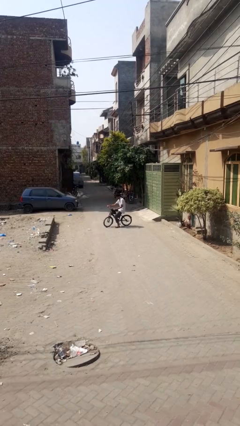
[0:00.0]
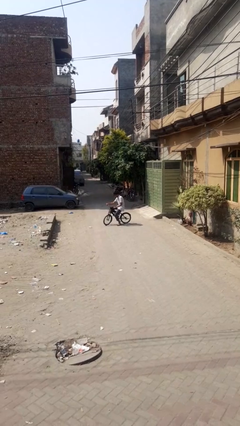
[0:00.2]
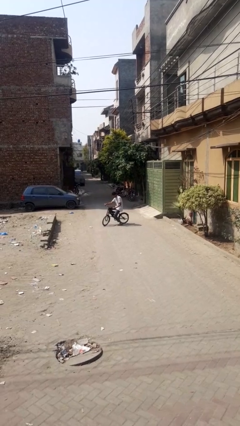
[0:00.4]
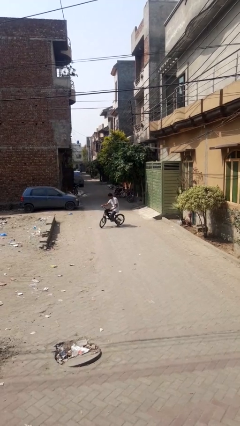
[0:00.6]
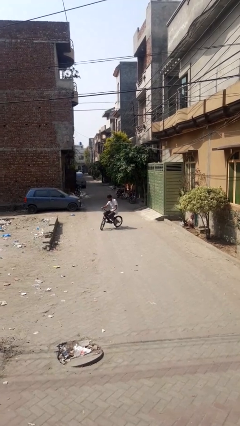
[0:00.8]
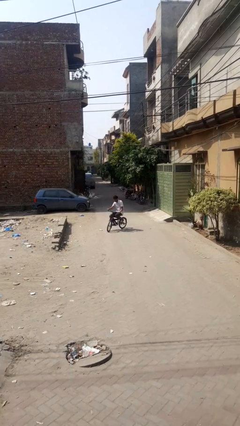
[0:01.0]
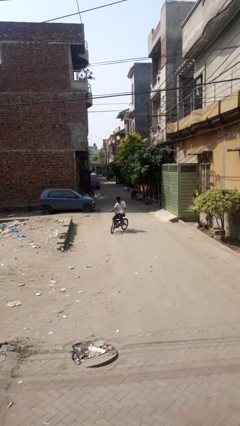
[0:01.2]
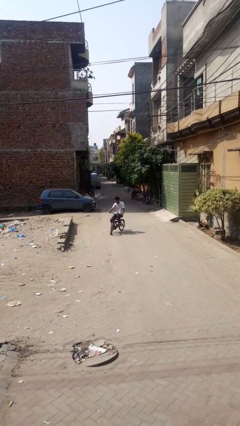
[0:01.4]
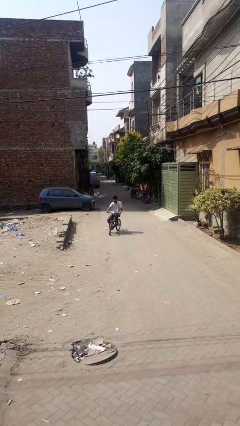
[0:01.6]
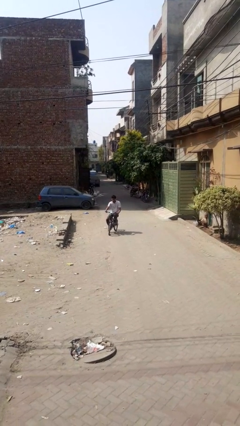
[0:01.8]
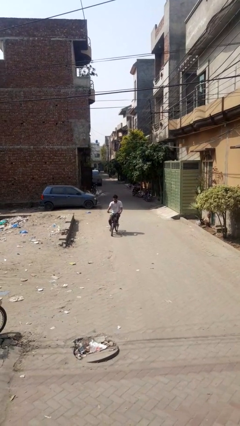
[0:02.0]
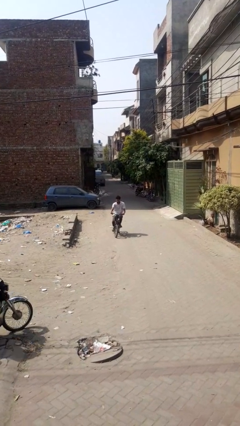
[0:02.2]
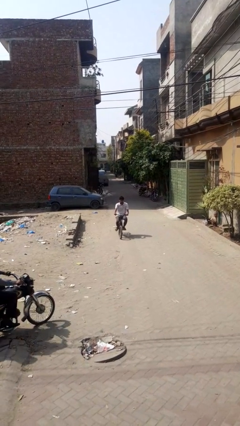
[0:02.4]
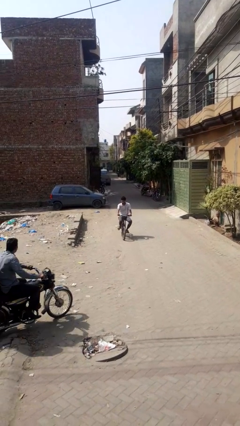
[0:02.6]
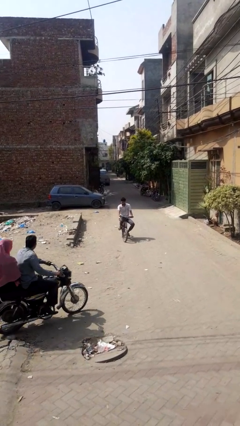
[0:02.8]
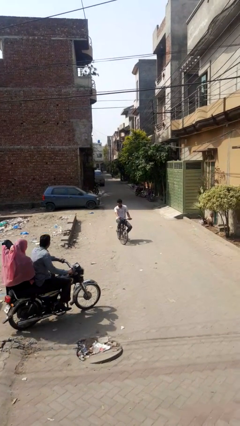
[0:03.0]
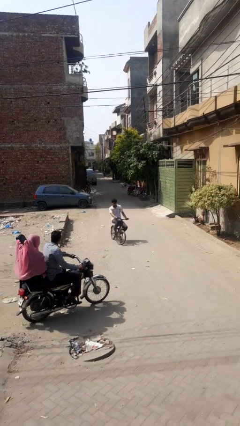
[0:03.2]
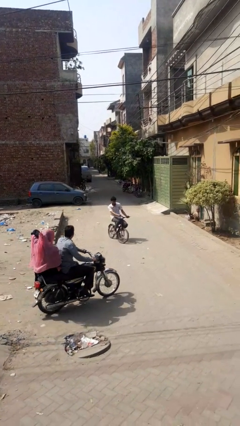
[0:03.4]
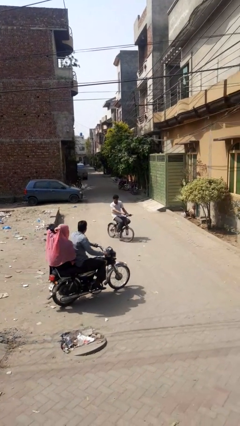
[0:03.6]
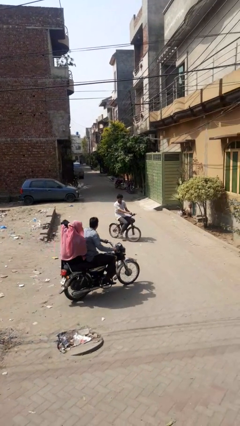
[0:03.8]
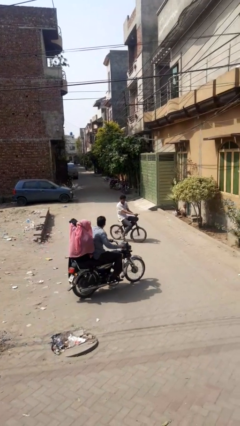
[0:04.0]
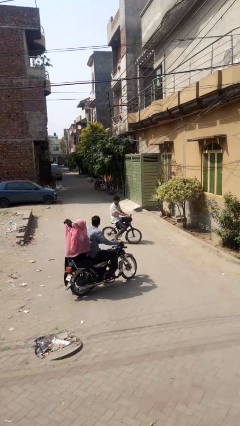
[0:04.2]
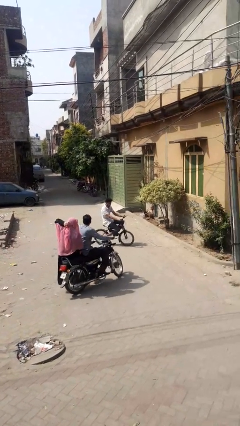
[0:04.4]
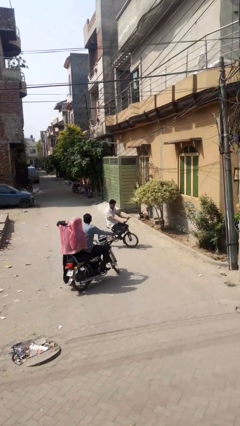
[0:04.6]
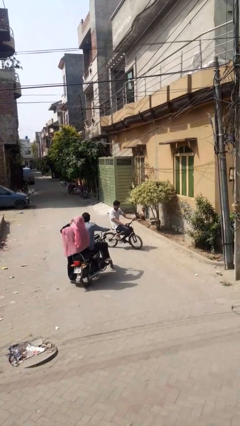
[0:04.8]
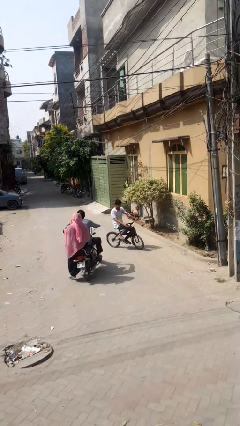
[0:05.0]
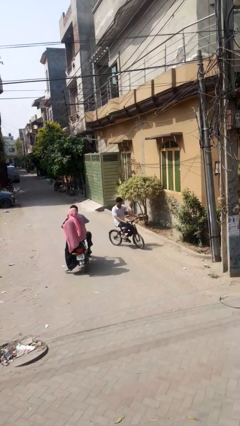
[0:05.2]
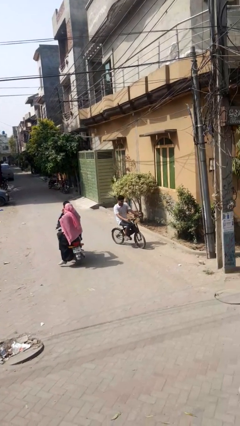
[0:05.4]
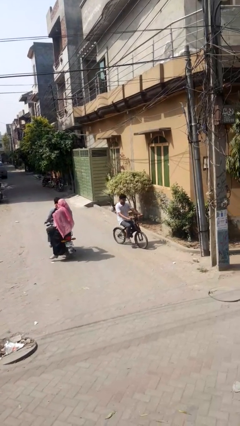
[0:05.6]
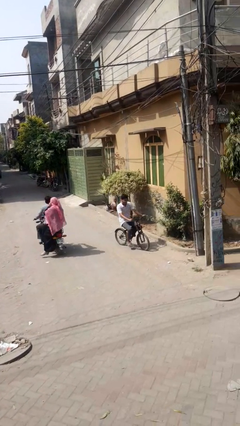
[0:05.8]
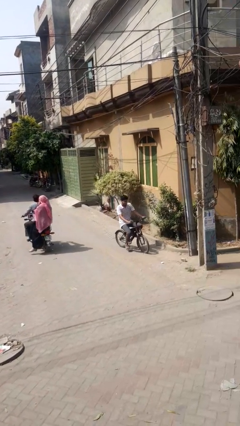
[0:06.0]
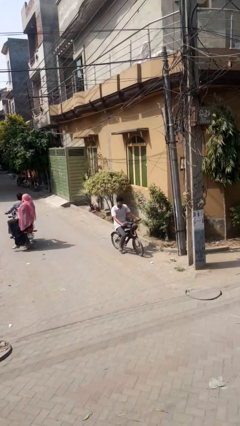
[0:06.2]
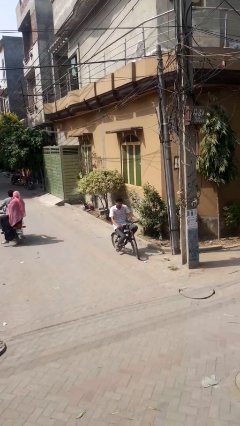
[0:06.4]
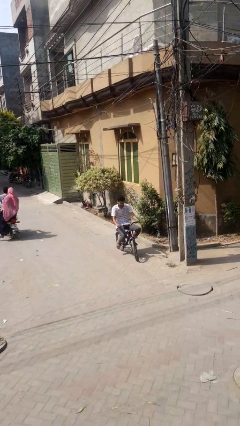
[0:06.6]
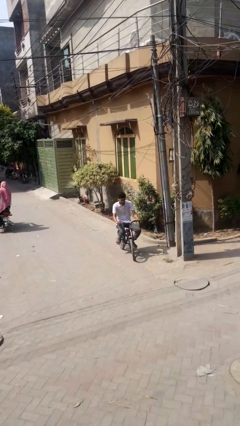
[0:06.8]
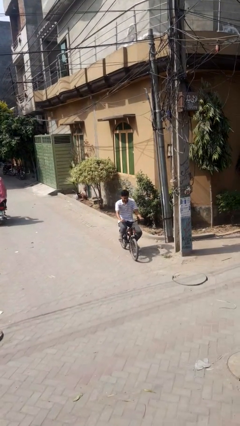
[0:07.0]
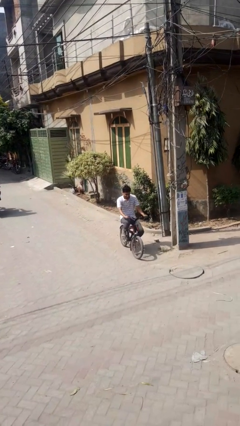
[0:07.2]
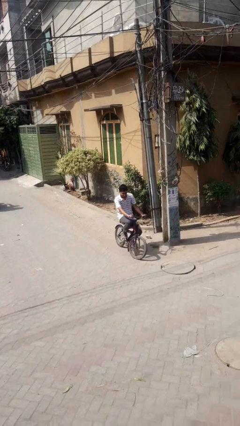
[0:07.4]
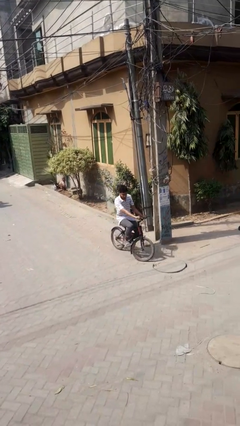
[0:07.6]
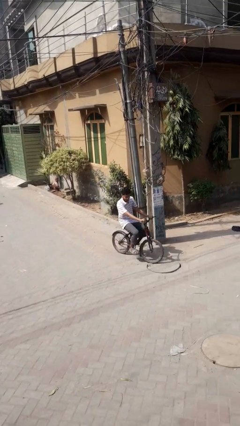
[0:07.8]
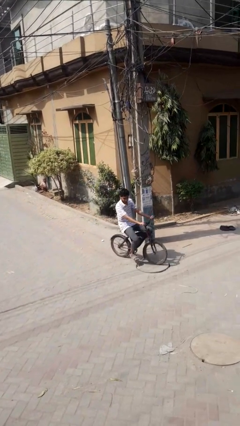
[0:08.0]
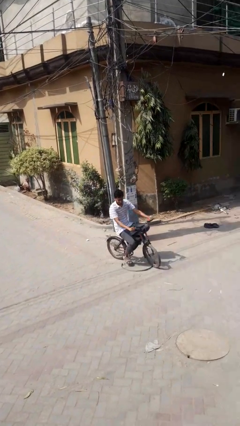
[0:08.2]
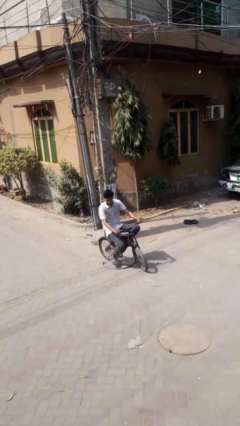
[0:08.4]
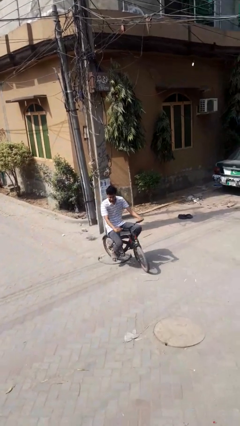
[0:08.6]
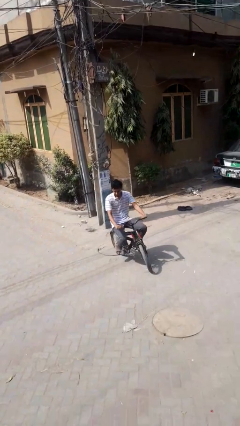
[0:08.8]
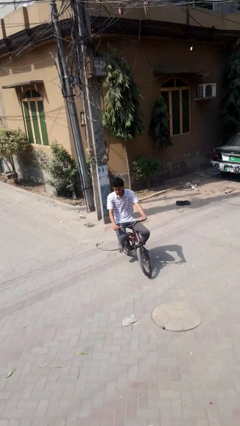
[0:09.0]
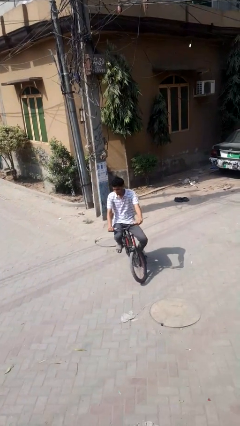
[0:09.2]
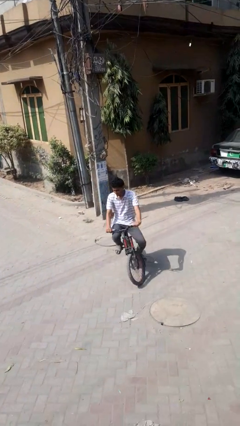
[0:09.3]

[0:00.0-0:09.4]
person rides bicycle

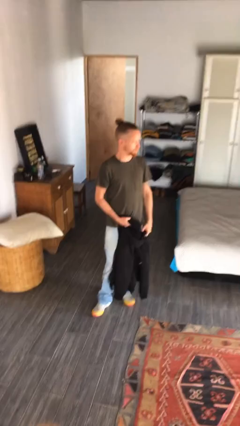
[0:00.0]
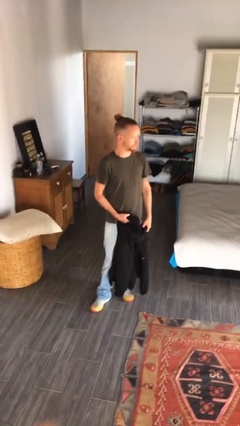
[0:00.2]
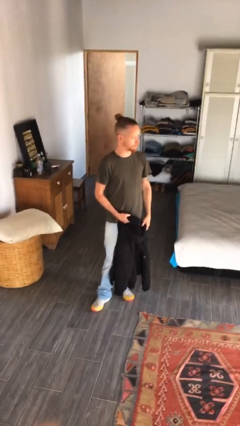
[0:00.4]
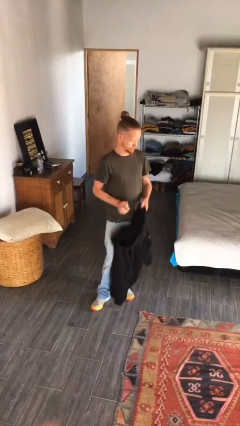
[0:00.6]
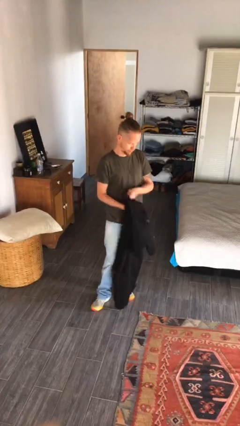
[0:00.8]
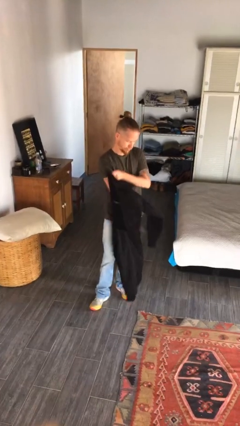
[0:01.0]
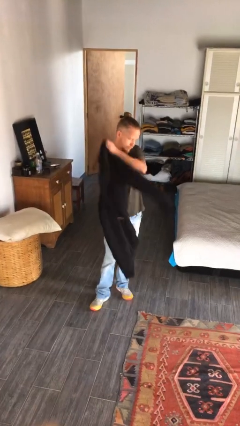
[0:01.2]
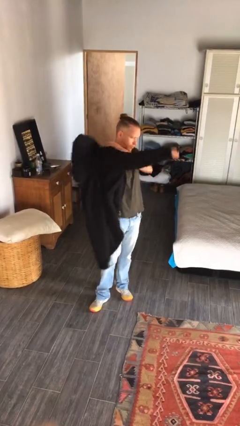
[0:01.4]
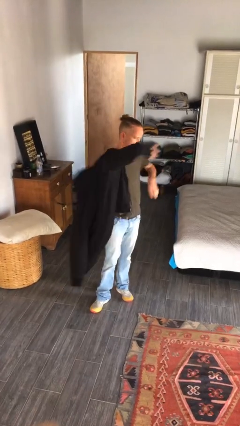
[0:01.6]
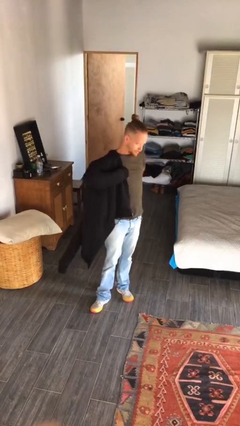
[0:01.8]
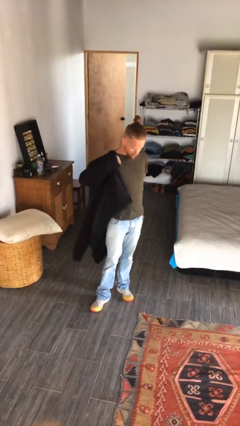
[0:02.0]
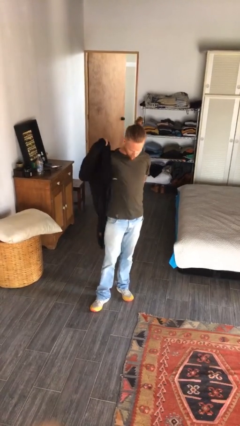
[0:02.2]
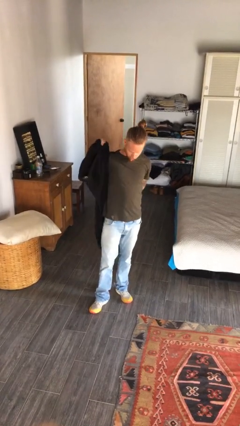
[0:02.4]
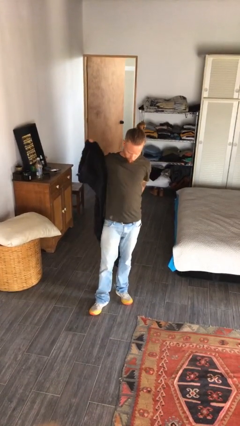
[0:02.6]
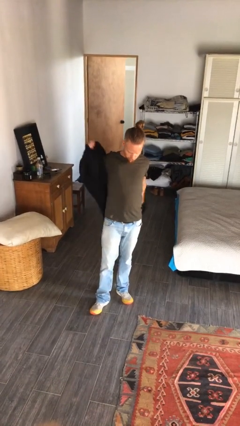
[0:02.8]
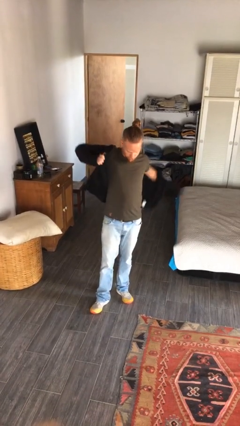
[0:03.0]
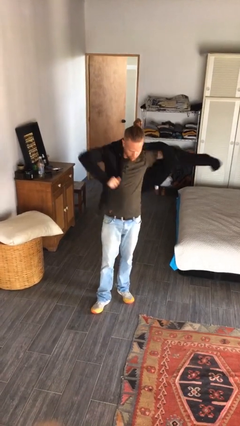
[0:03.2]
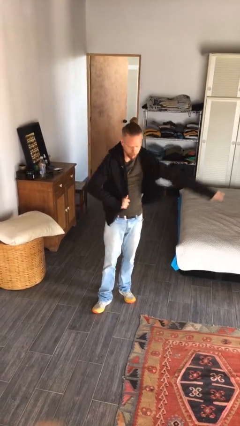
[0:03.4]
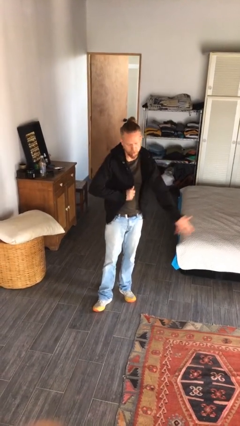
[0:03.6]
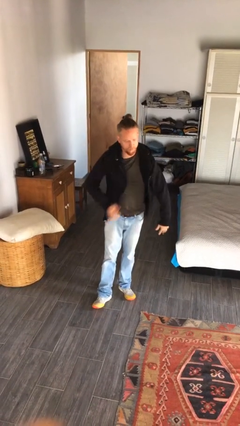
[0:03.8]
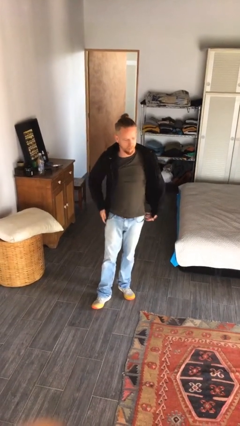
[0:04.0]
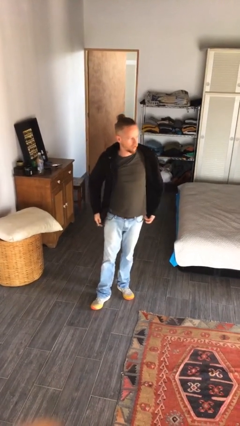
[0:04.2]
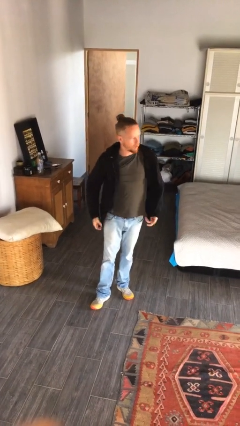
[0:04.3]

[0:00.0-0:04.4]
person puts on jacket

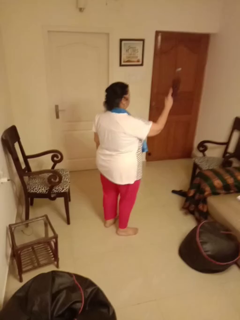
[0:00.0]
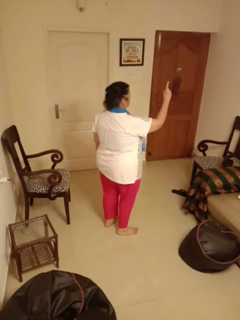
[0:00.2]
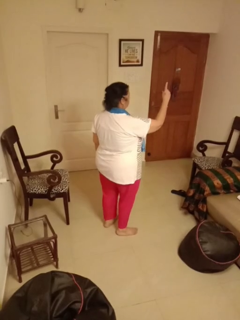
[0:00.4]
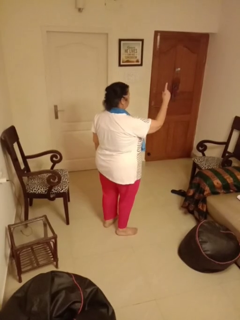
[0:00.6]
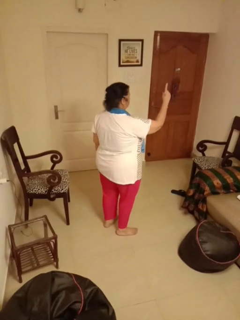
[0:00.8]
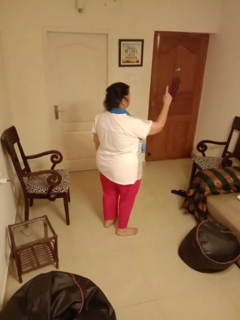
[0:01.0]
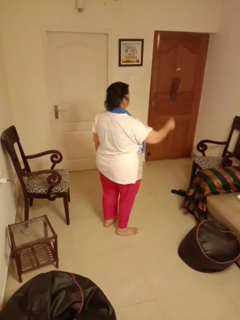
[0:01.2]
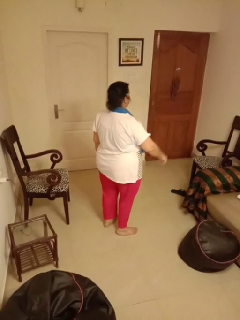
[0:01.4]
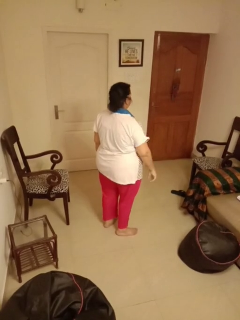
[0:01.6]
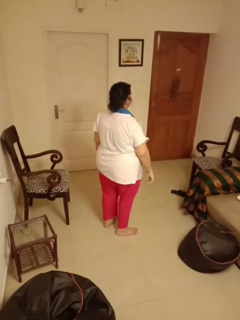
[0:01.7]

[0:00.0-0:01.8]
person gestures number one

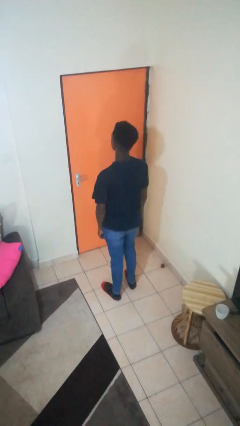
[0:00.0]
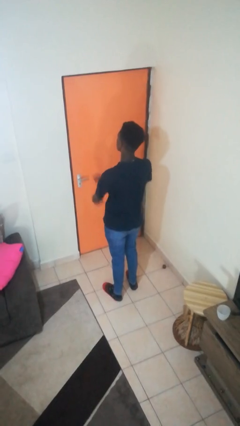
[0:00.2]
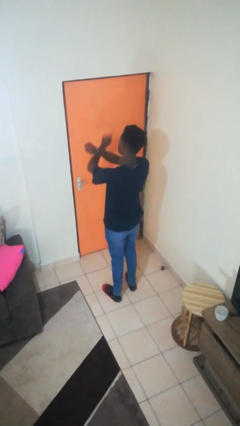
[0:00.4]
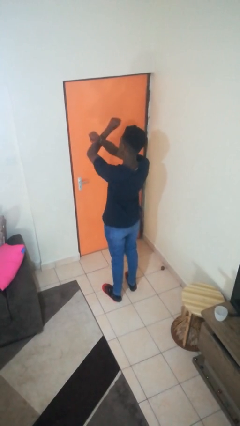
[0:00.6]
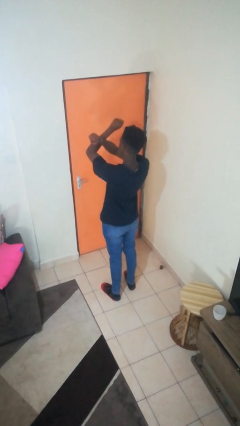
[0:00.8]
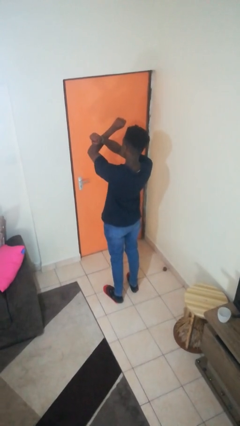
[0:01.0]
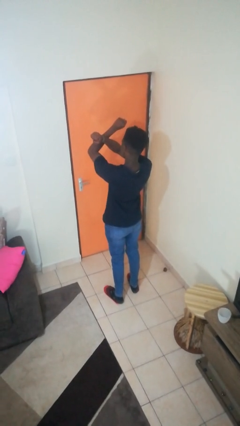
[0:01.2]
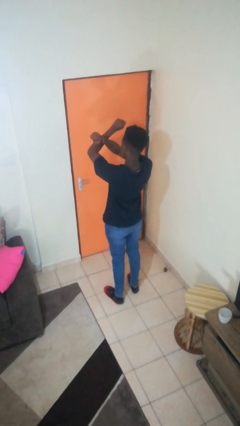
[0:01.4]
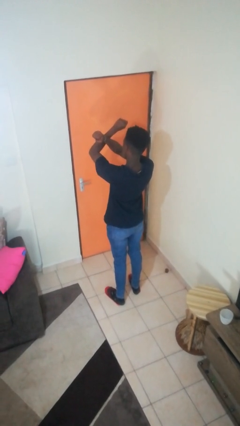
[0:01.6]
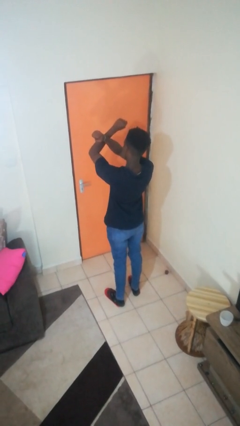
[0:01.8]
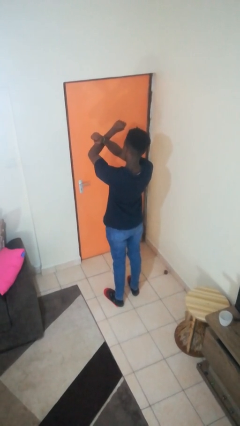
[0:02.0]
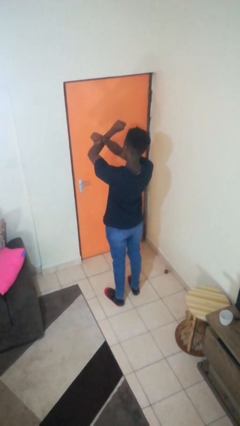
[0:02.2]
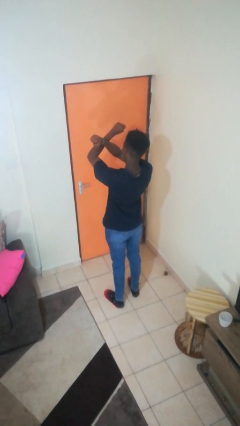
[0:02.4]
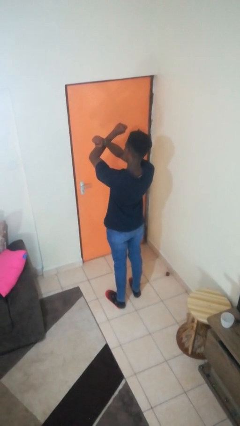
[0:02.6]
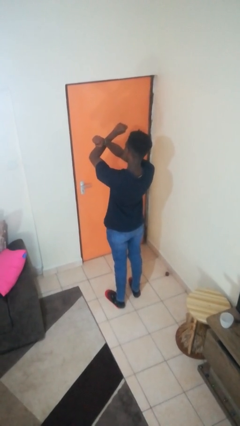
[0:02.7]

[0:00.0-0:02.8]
person gestures arms x
